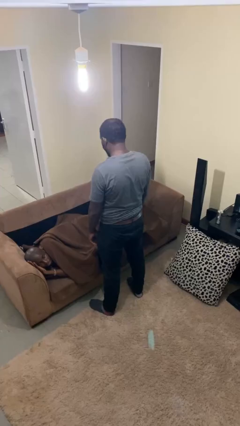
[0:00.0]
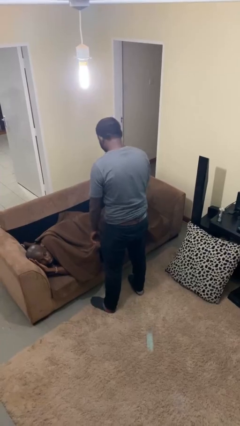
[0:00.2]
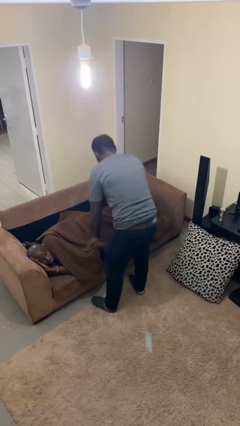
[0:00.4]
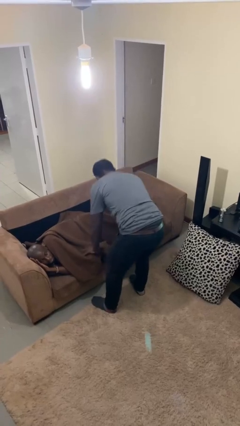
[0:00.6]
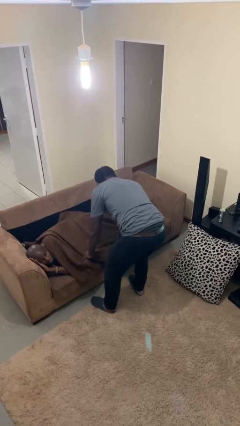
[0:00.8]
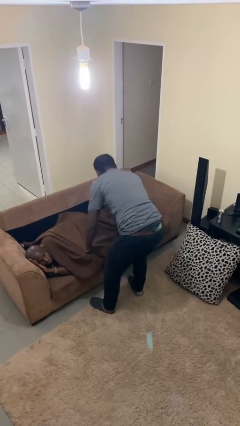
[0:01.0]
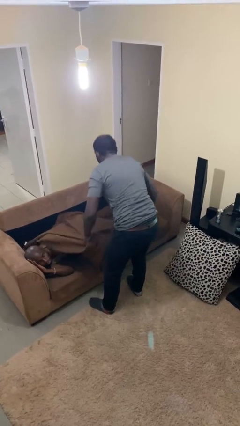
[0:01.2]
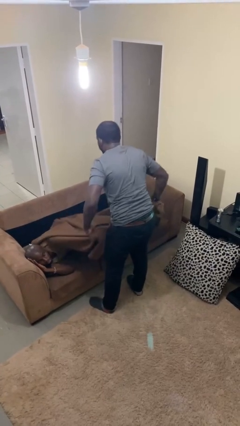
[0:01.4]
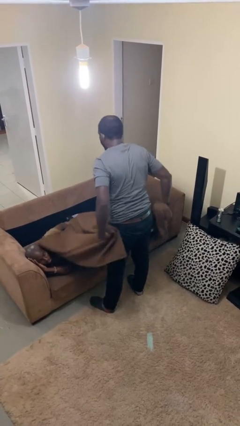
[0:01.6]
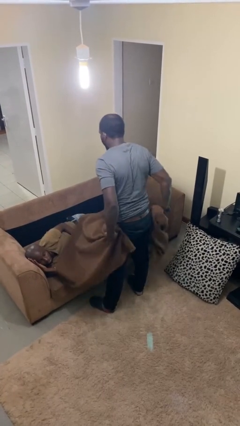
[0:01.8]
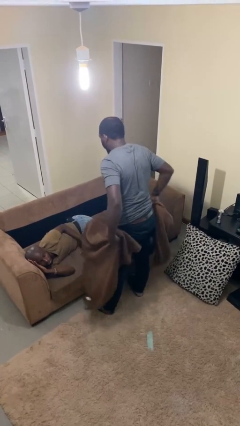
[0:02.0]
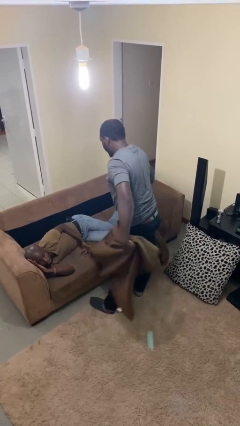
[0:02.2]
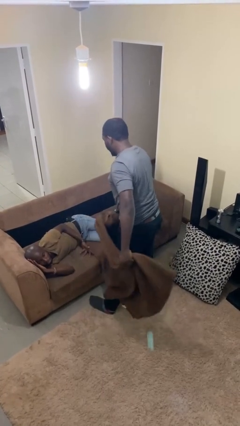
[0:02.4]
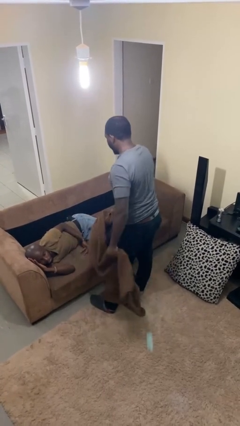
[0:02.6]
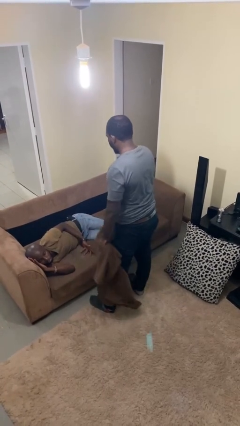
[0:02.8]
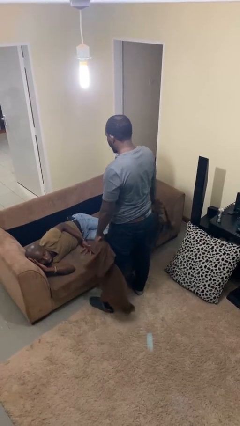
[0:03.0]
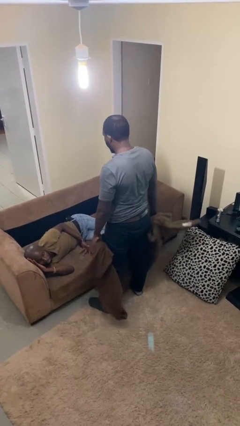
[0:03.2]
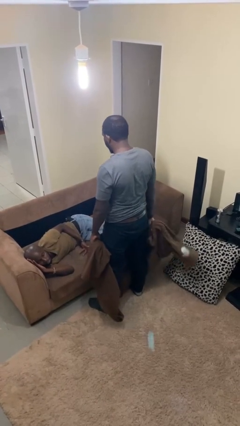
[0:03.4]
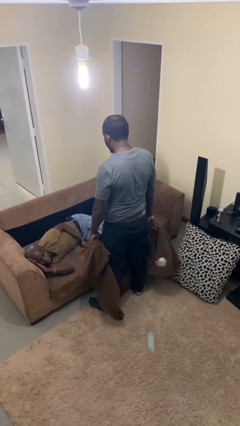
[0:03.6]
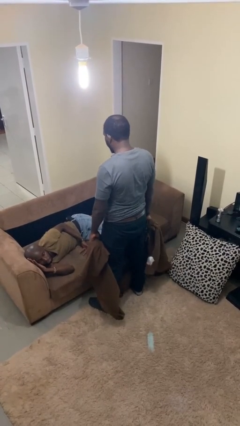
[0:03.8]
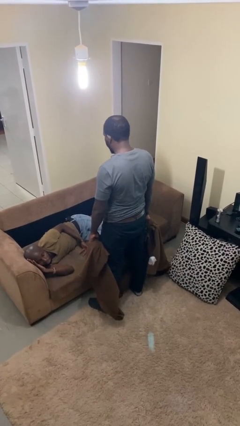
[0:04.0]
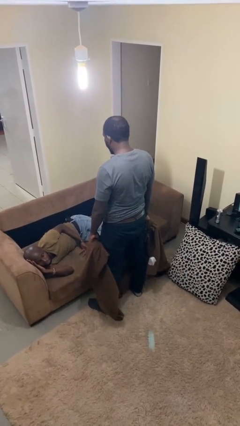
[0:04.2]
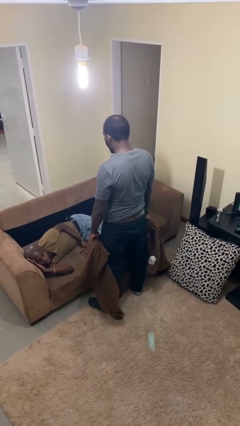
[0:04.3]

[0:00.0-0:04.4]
person uncovers friend with blanket

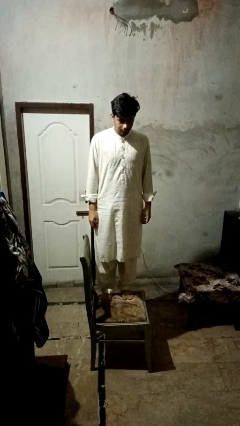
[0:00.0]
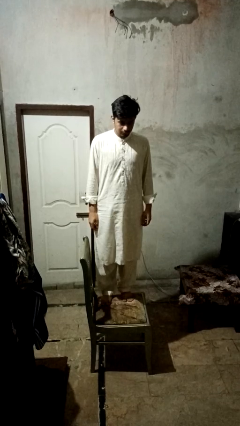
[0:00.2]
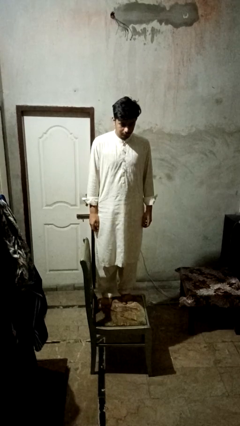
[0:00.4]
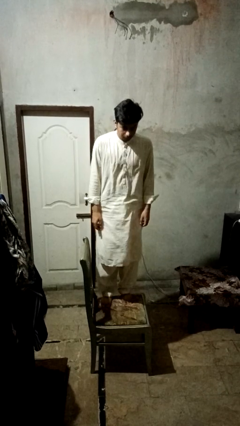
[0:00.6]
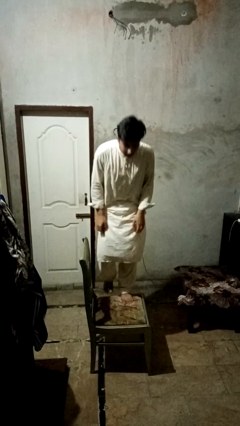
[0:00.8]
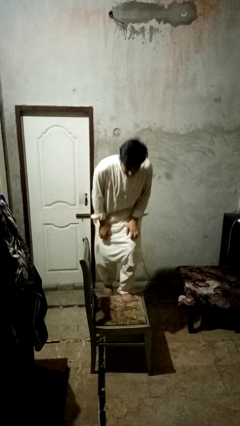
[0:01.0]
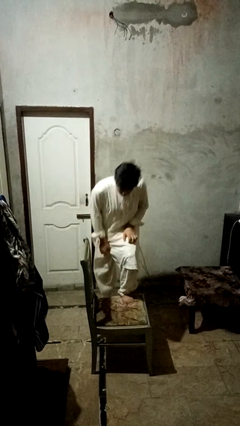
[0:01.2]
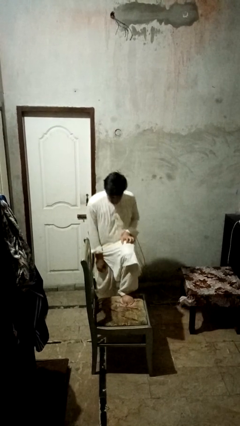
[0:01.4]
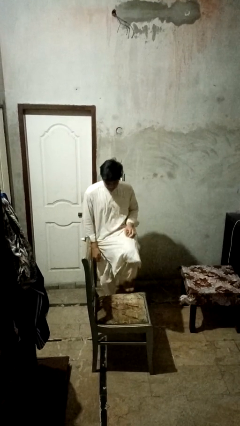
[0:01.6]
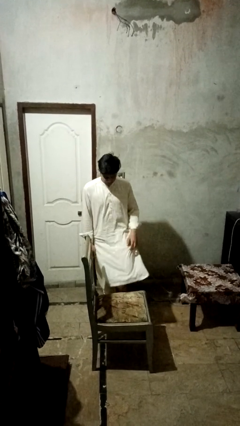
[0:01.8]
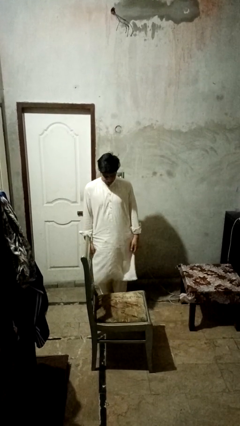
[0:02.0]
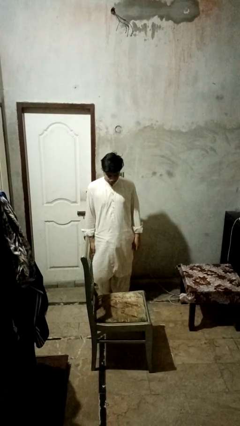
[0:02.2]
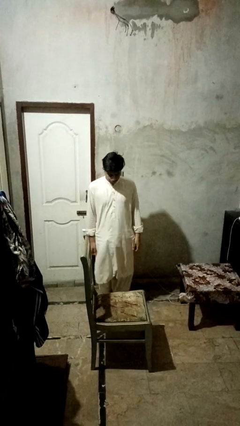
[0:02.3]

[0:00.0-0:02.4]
person climbs off chair

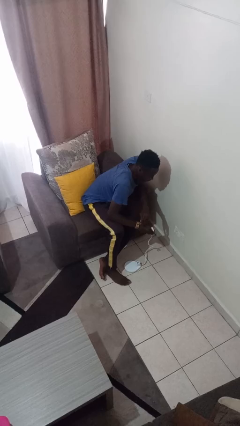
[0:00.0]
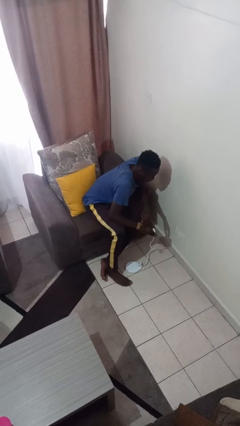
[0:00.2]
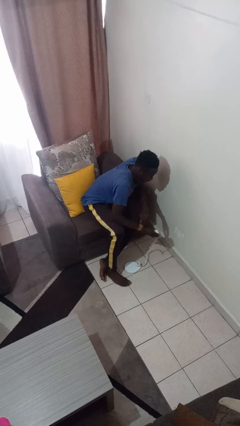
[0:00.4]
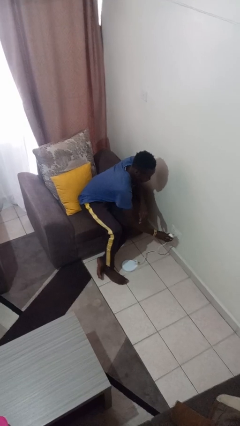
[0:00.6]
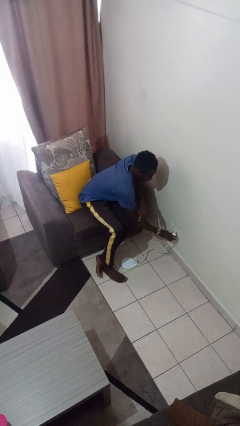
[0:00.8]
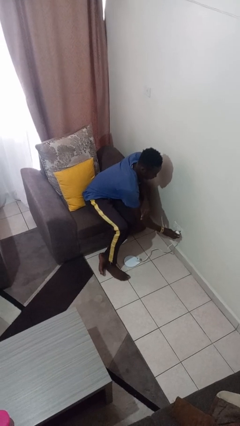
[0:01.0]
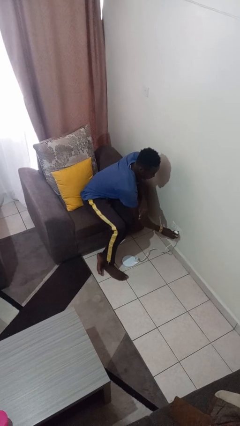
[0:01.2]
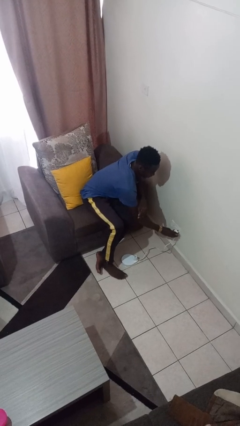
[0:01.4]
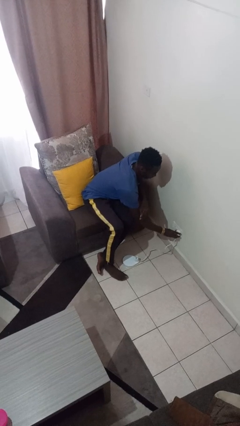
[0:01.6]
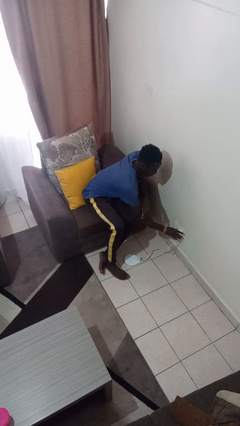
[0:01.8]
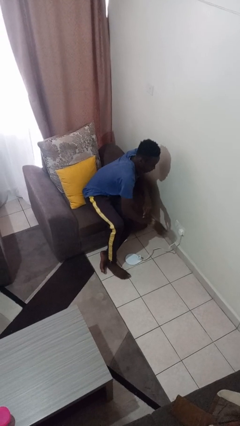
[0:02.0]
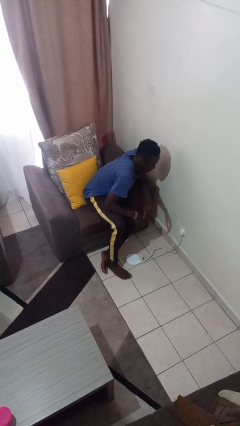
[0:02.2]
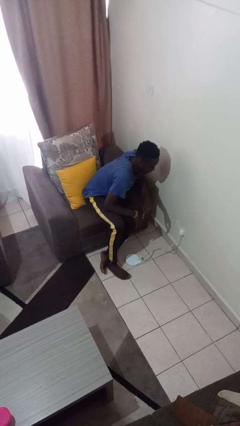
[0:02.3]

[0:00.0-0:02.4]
person plugs into electrical socket

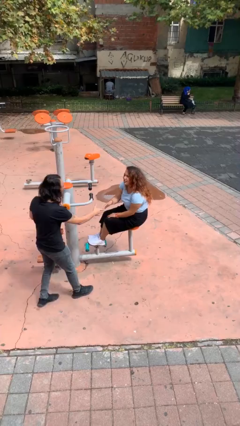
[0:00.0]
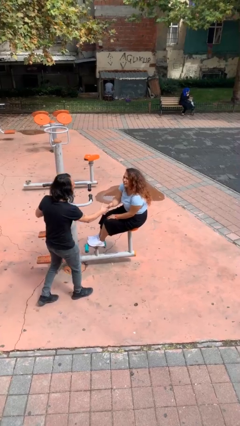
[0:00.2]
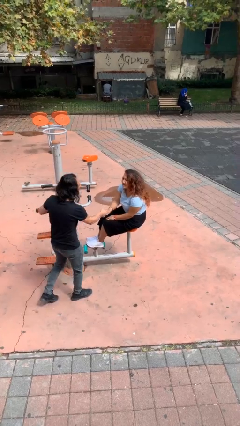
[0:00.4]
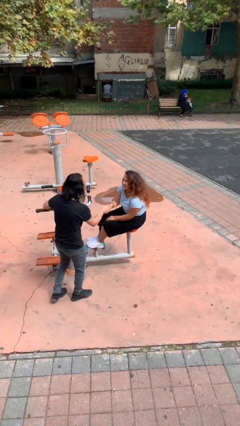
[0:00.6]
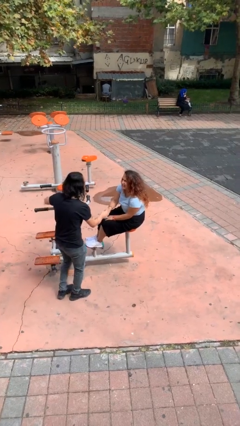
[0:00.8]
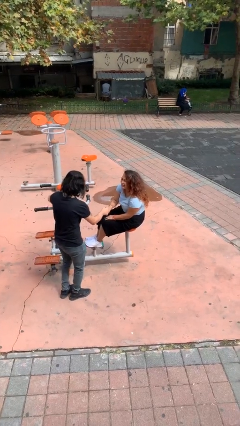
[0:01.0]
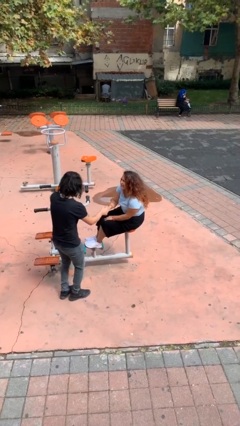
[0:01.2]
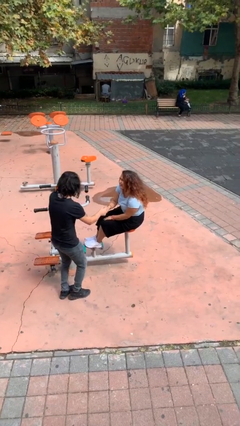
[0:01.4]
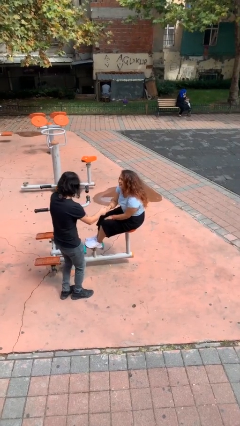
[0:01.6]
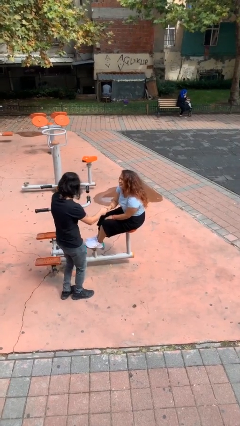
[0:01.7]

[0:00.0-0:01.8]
person shakes hand

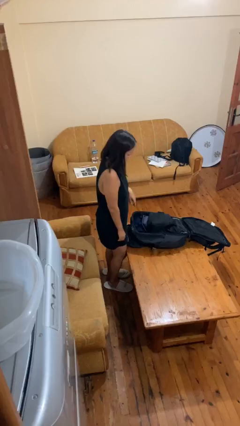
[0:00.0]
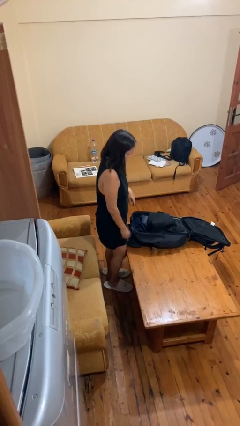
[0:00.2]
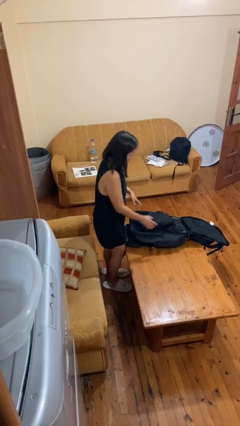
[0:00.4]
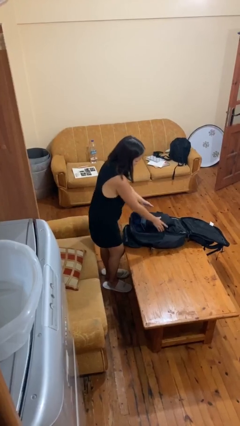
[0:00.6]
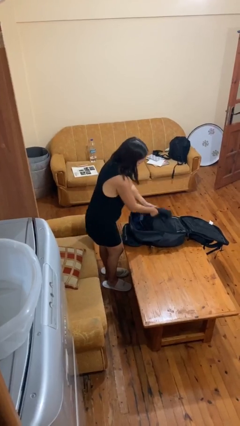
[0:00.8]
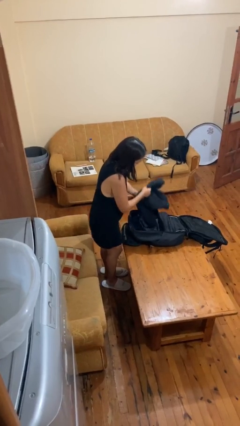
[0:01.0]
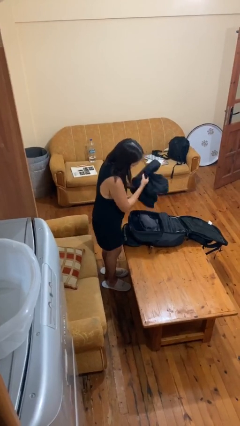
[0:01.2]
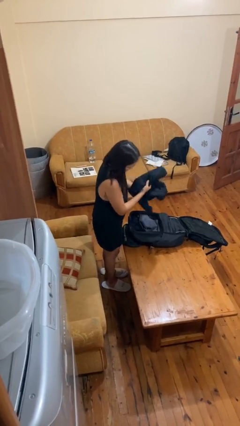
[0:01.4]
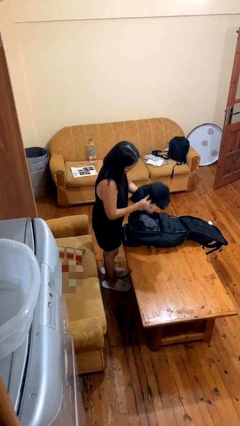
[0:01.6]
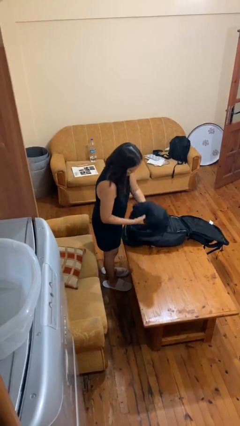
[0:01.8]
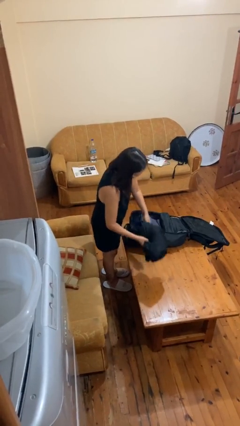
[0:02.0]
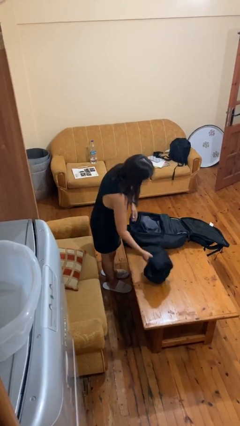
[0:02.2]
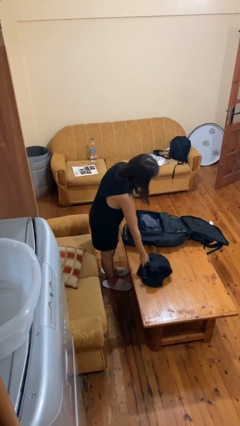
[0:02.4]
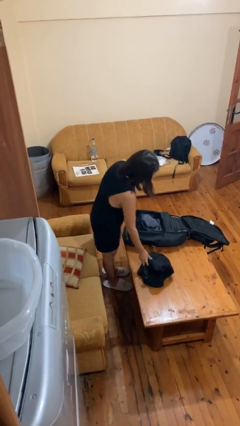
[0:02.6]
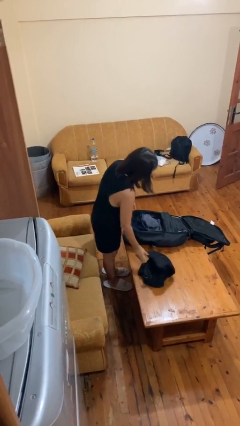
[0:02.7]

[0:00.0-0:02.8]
person unloads clothes from suitcase

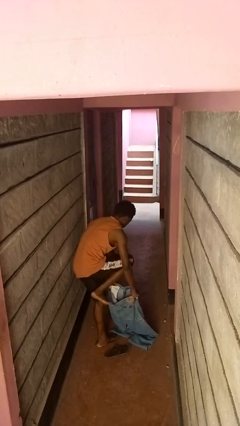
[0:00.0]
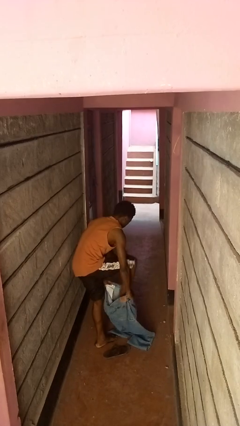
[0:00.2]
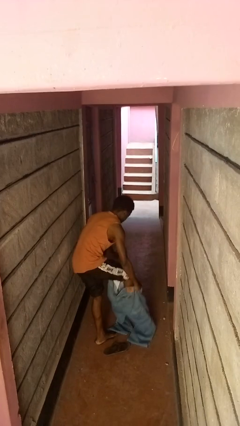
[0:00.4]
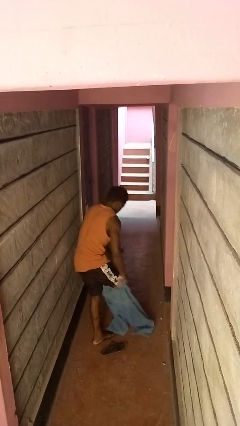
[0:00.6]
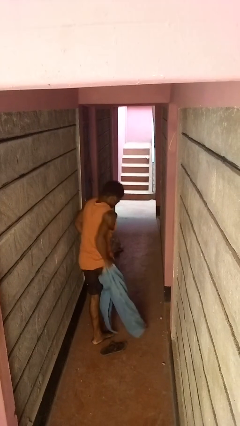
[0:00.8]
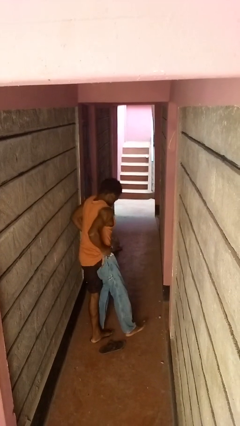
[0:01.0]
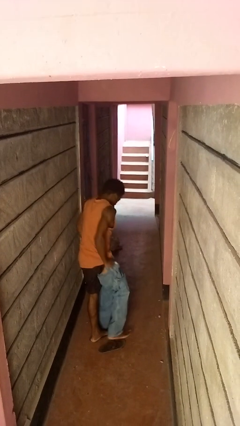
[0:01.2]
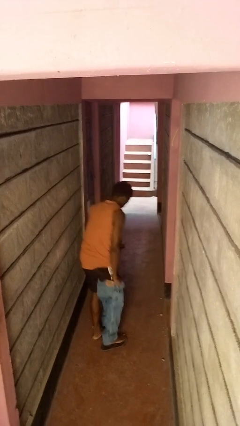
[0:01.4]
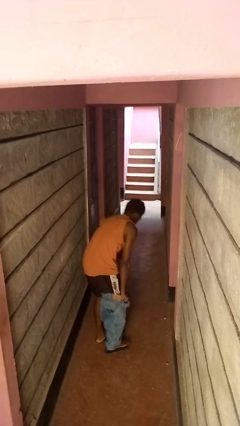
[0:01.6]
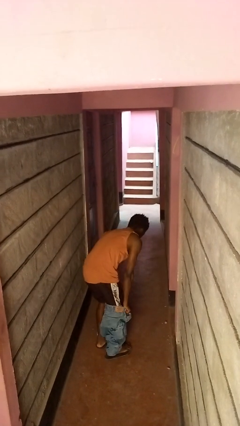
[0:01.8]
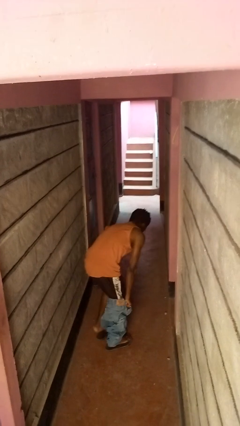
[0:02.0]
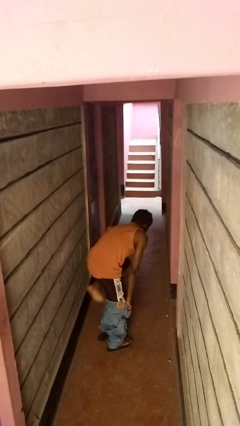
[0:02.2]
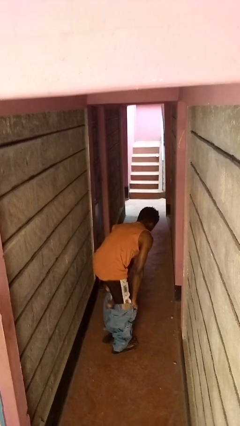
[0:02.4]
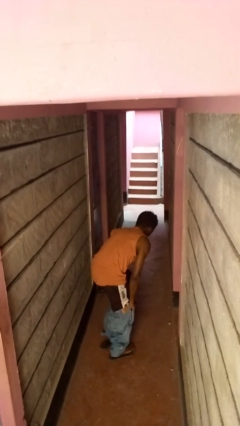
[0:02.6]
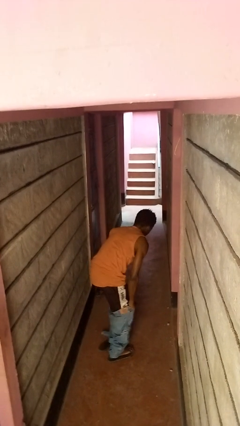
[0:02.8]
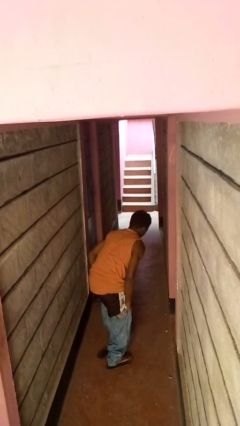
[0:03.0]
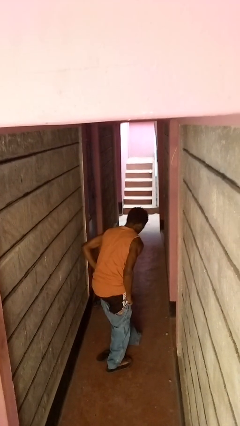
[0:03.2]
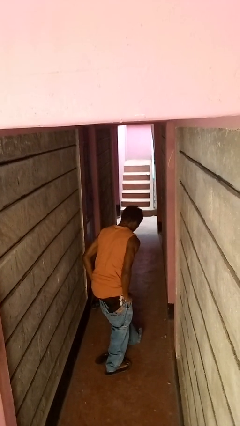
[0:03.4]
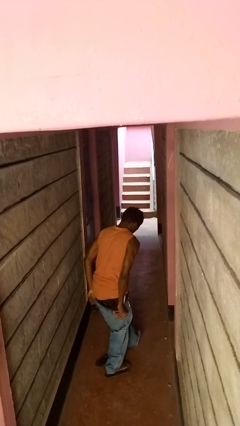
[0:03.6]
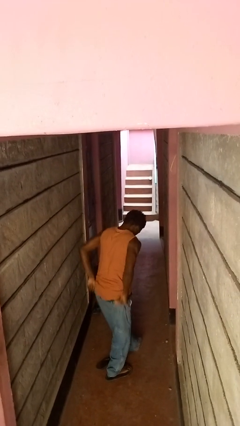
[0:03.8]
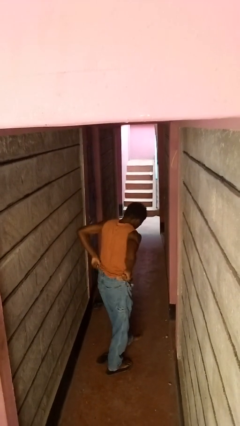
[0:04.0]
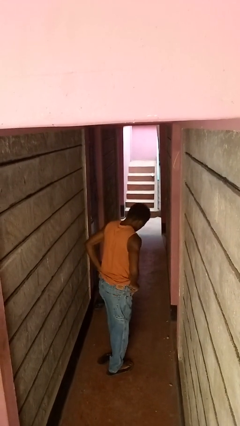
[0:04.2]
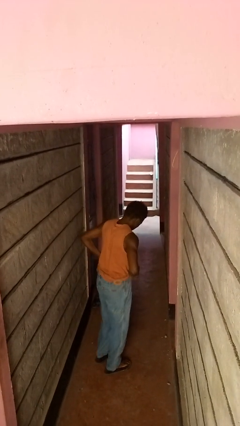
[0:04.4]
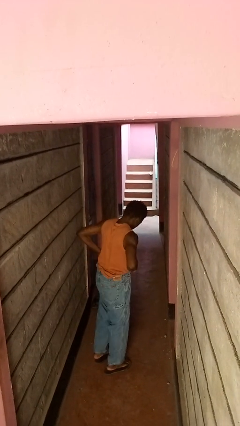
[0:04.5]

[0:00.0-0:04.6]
person puts on pants
